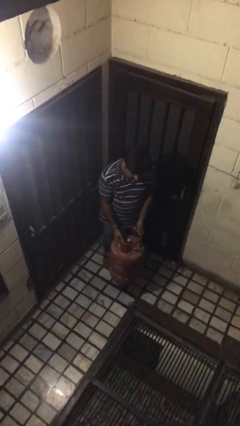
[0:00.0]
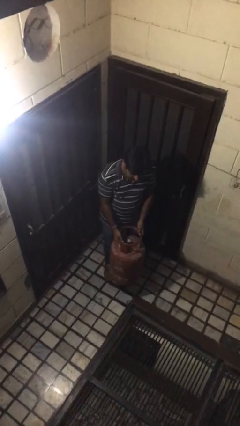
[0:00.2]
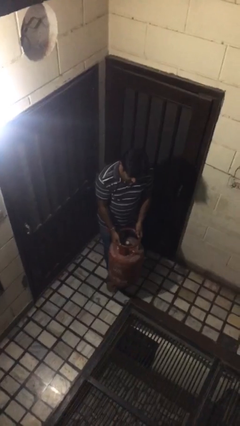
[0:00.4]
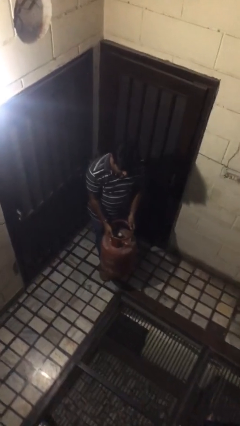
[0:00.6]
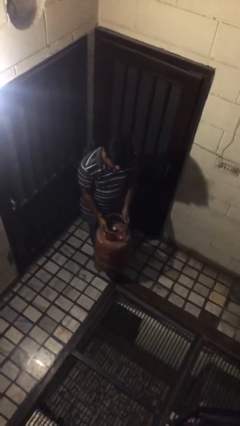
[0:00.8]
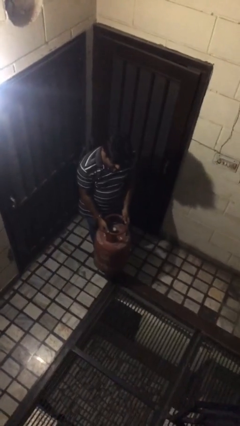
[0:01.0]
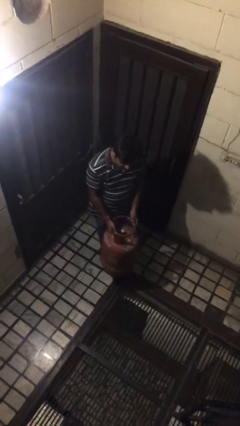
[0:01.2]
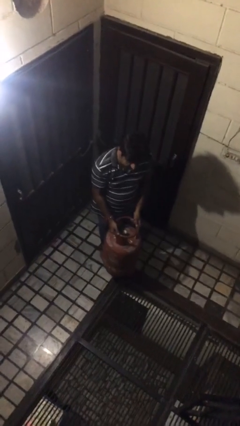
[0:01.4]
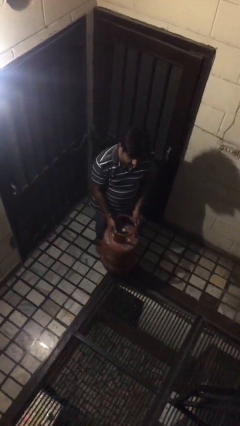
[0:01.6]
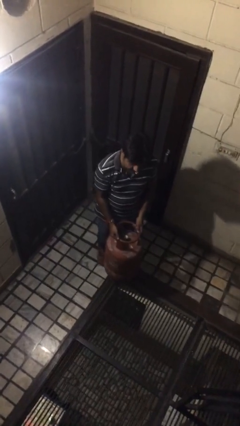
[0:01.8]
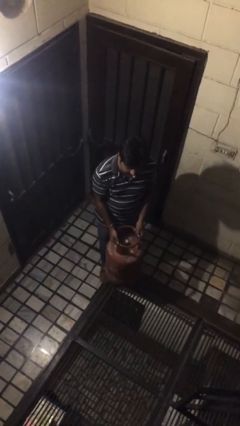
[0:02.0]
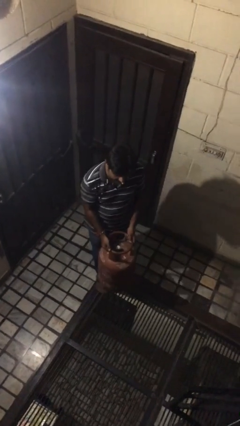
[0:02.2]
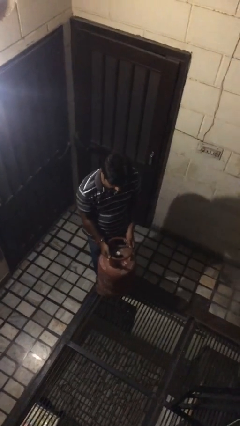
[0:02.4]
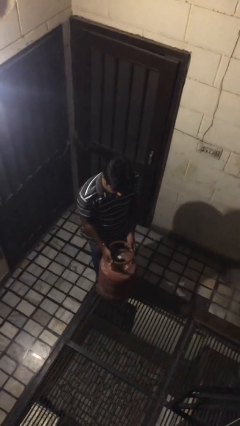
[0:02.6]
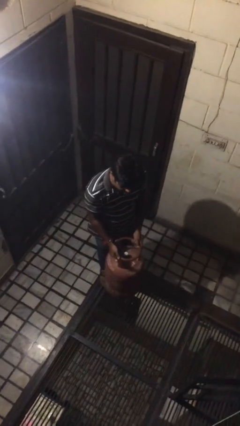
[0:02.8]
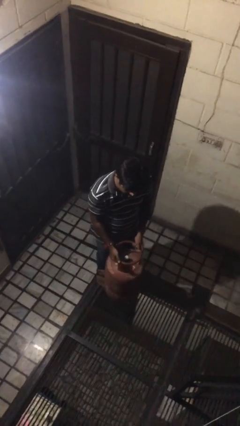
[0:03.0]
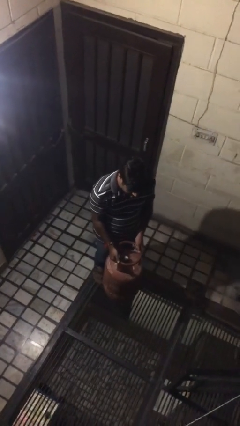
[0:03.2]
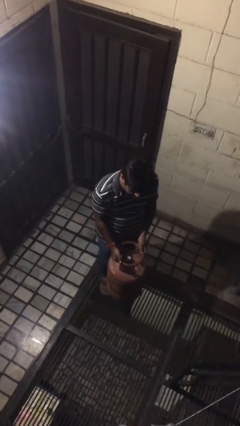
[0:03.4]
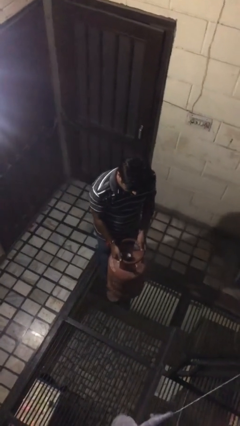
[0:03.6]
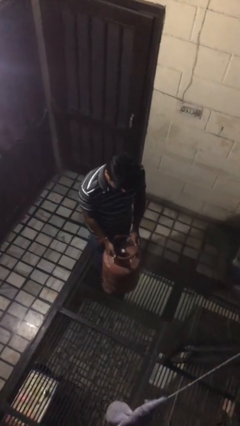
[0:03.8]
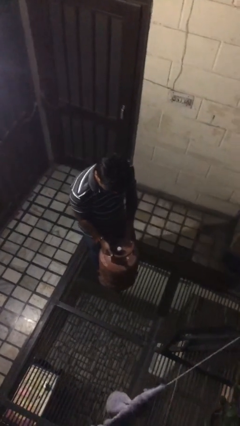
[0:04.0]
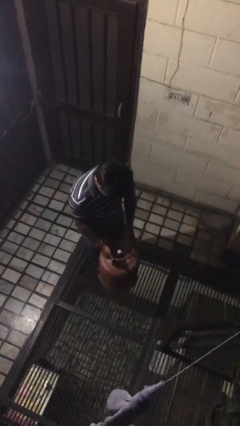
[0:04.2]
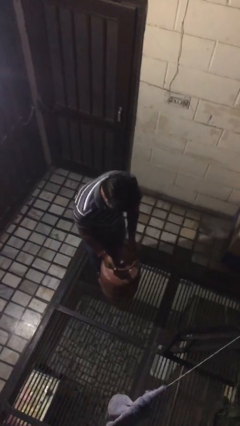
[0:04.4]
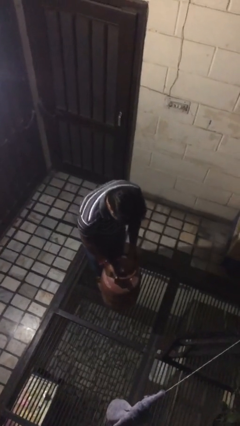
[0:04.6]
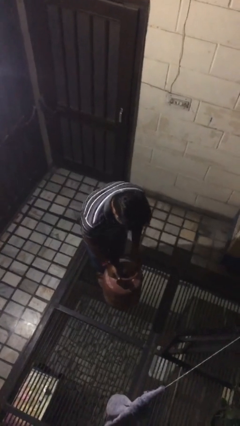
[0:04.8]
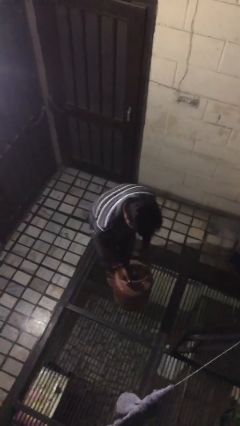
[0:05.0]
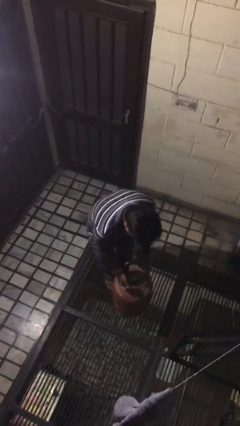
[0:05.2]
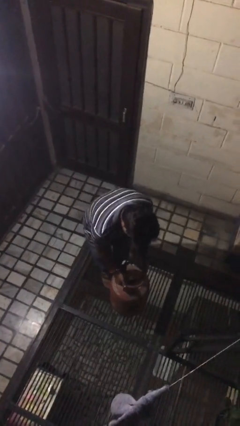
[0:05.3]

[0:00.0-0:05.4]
person carries heavy object

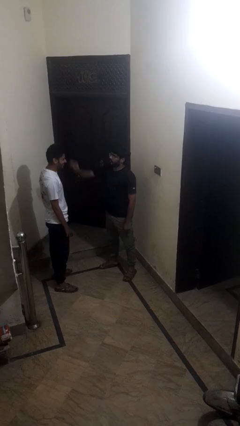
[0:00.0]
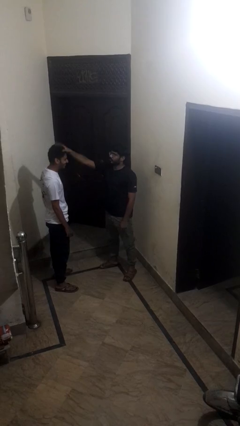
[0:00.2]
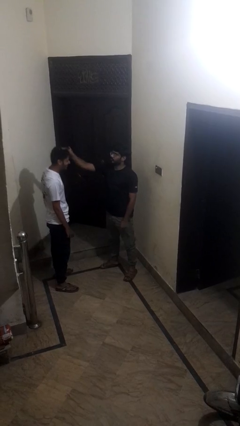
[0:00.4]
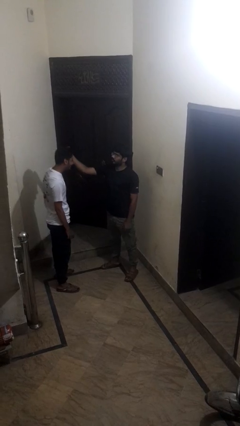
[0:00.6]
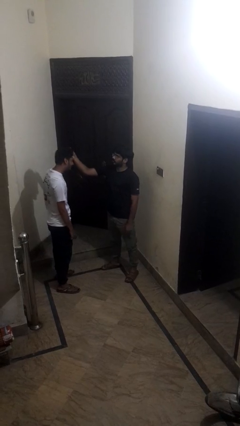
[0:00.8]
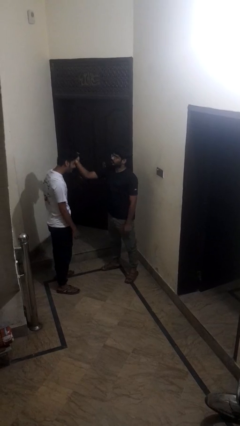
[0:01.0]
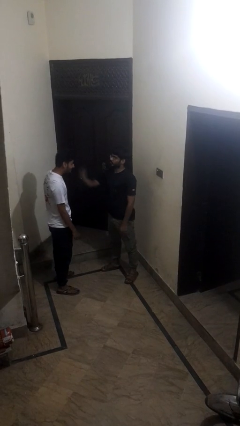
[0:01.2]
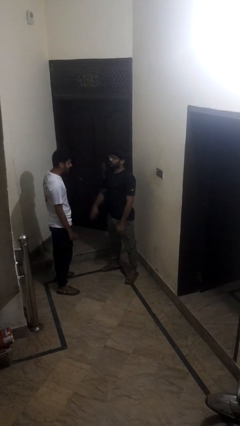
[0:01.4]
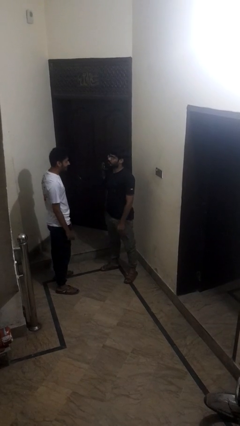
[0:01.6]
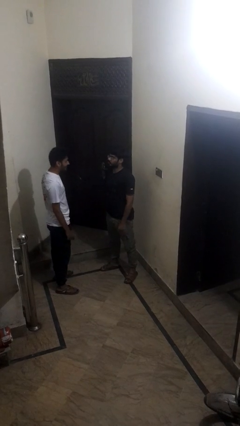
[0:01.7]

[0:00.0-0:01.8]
person grabs person by hair

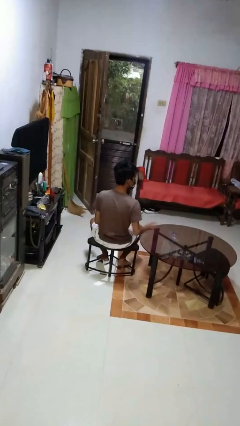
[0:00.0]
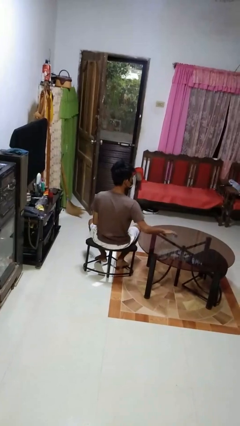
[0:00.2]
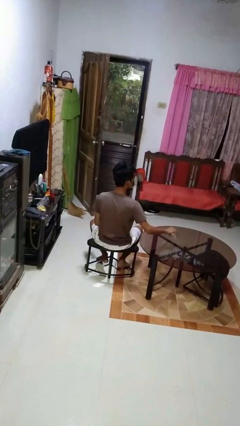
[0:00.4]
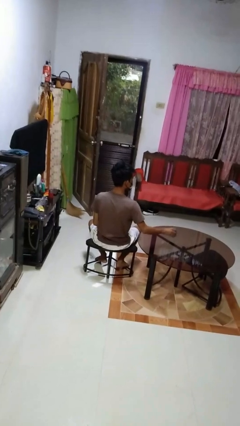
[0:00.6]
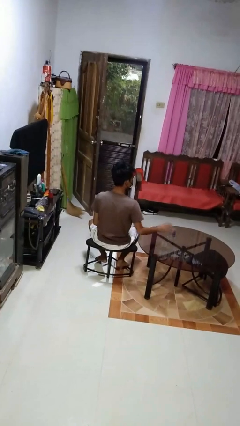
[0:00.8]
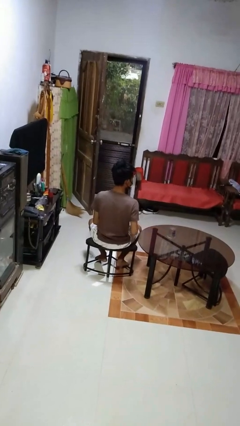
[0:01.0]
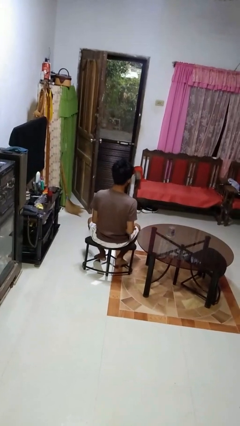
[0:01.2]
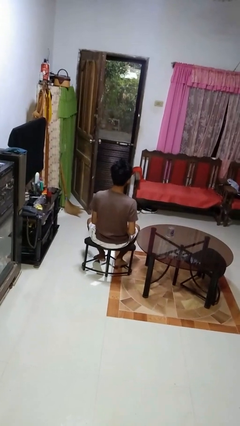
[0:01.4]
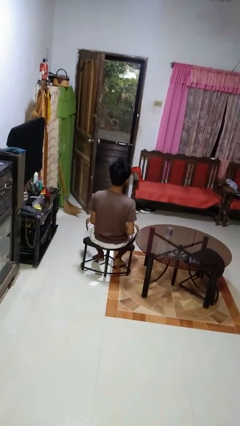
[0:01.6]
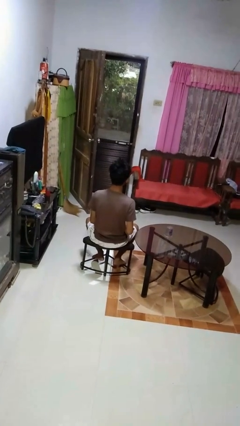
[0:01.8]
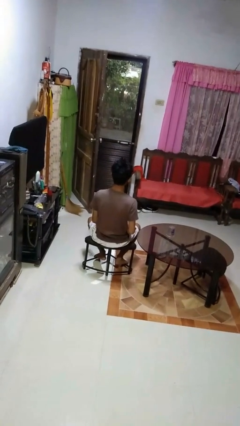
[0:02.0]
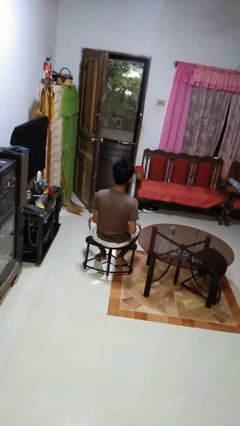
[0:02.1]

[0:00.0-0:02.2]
person sets upright glass

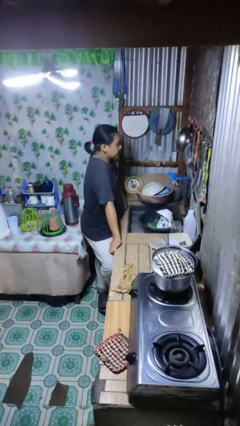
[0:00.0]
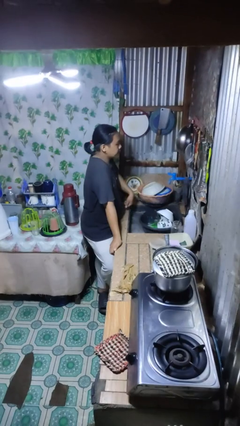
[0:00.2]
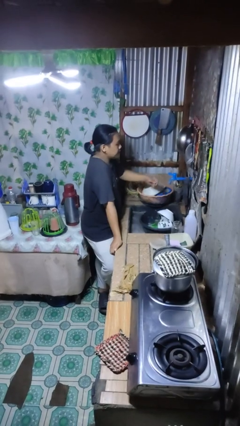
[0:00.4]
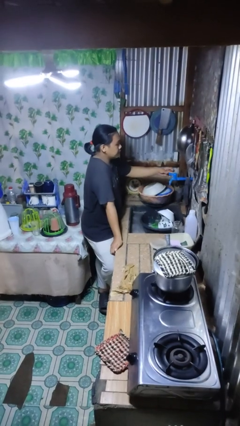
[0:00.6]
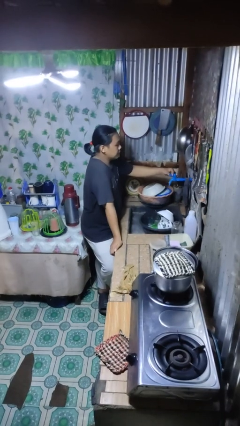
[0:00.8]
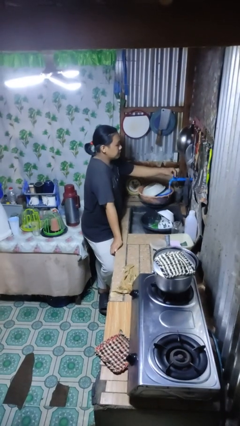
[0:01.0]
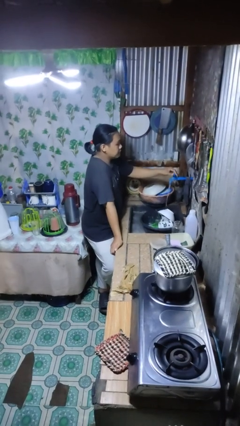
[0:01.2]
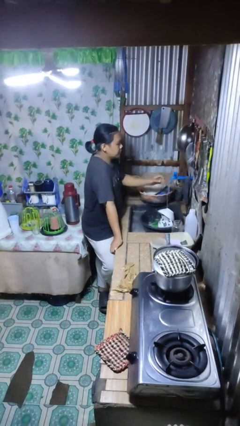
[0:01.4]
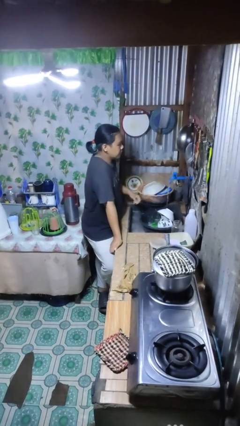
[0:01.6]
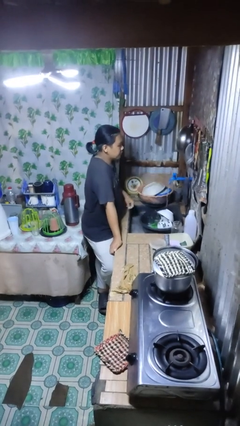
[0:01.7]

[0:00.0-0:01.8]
person turns on faucet

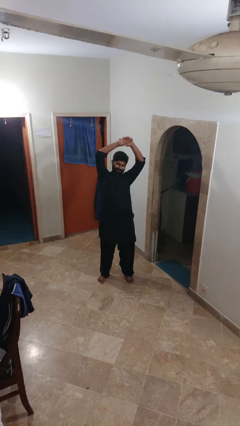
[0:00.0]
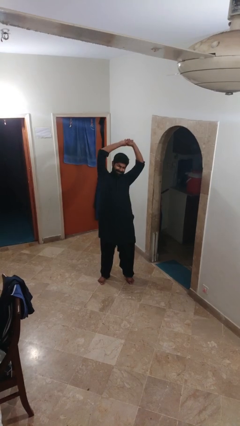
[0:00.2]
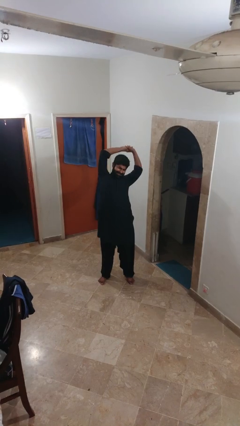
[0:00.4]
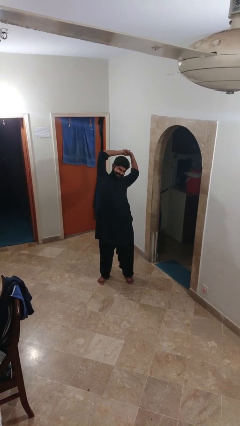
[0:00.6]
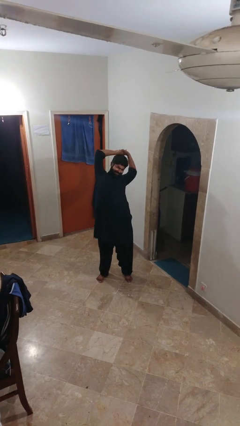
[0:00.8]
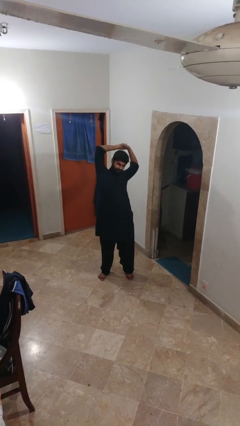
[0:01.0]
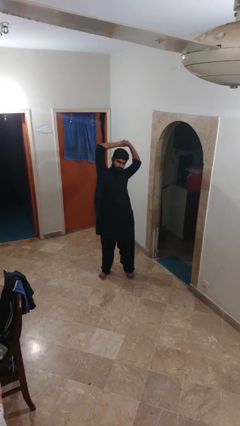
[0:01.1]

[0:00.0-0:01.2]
person stretches arms over head

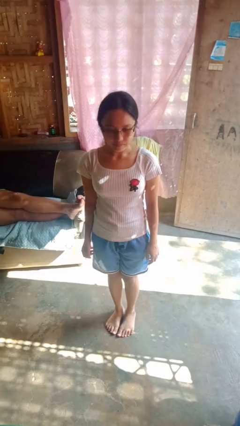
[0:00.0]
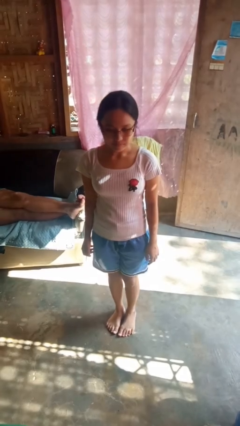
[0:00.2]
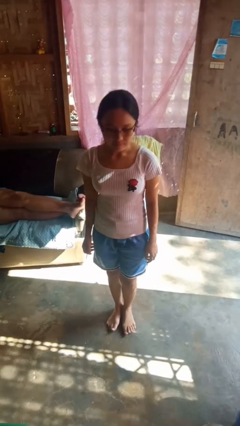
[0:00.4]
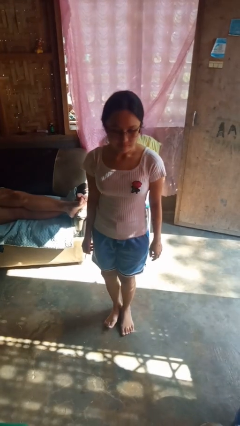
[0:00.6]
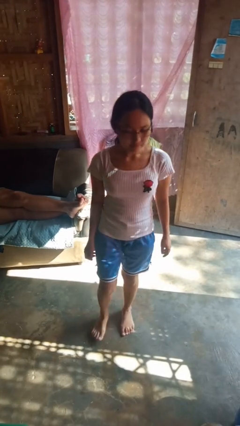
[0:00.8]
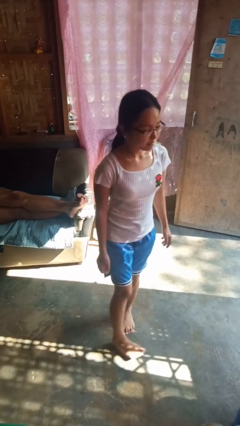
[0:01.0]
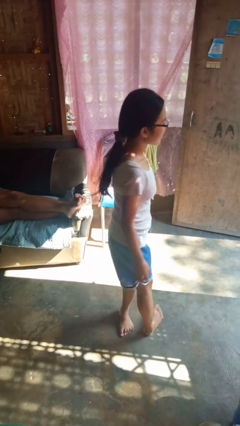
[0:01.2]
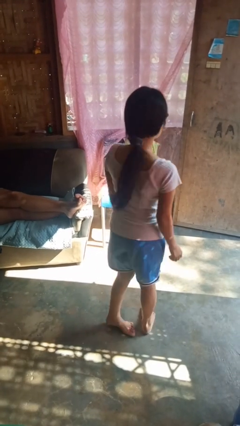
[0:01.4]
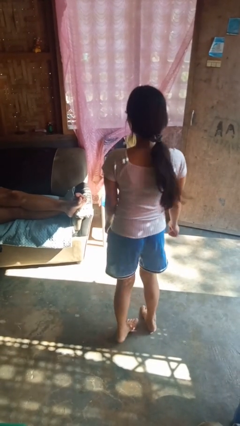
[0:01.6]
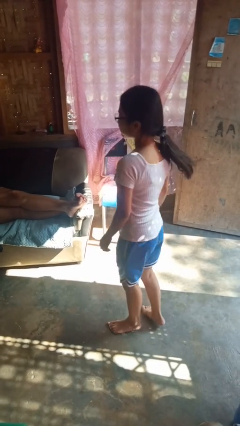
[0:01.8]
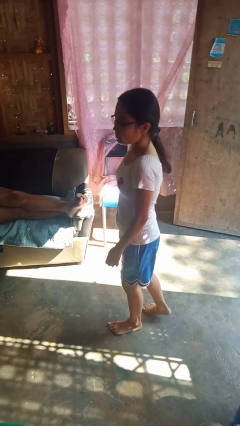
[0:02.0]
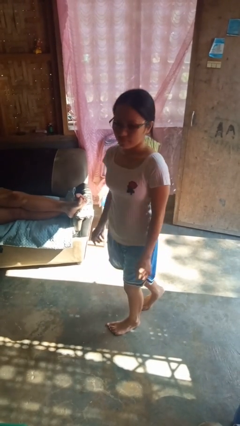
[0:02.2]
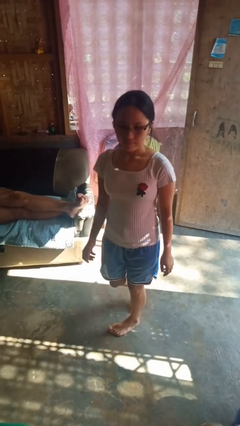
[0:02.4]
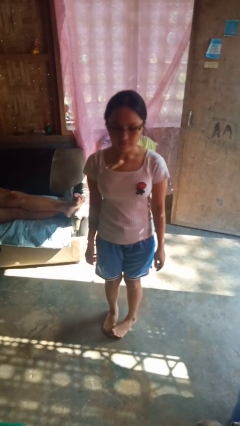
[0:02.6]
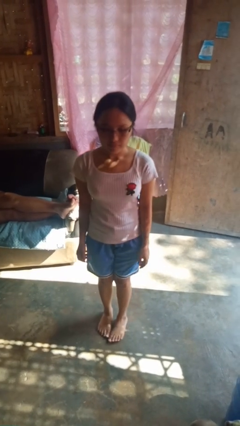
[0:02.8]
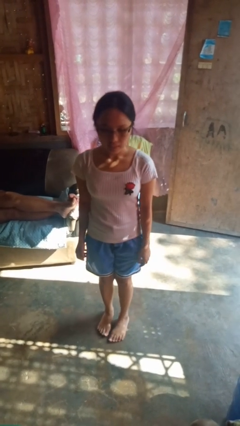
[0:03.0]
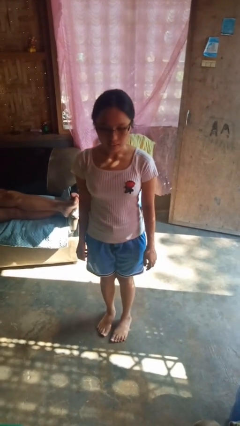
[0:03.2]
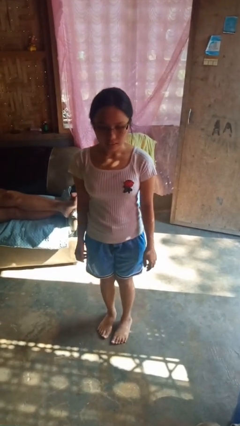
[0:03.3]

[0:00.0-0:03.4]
person twirls

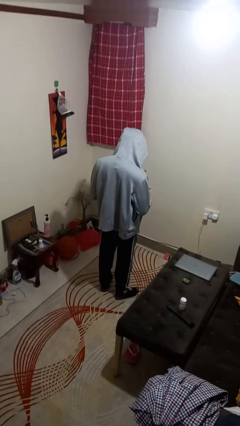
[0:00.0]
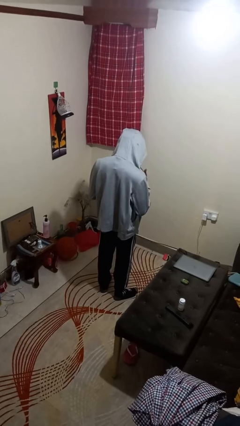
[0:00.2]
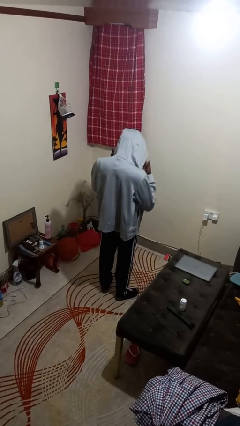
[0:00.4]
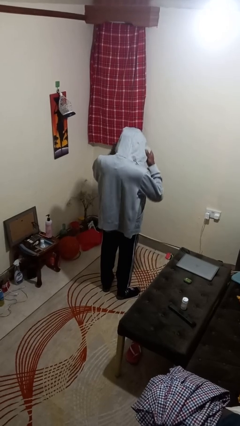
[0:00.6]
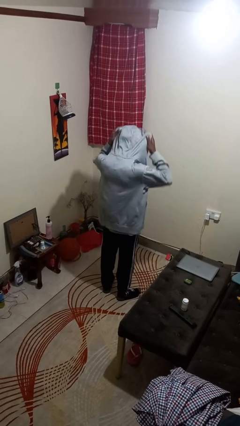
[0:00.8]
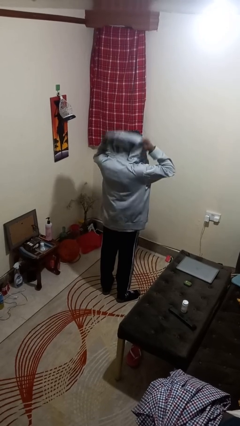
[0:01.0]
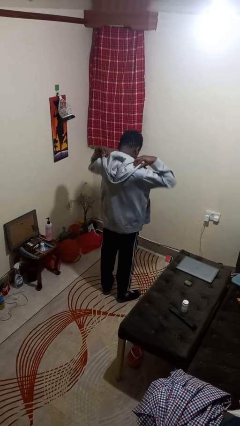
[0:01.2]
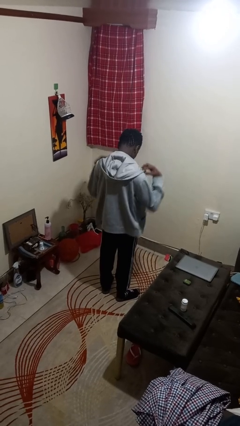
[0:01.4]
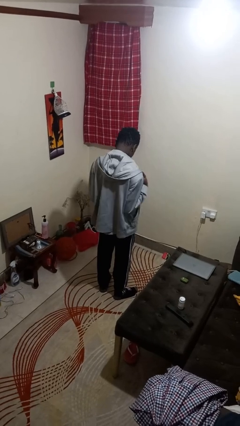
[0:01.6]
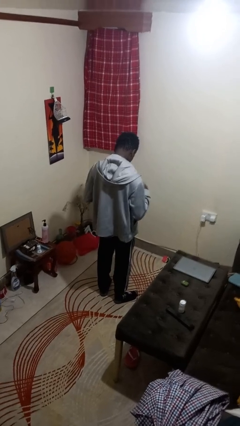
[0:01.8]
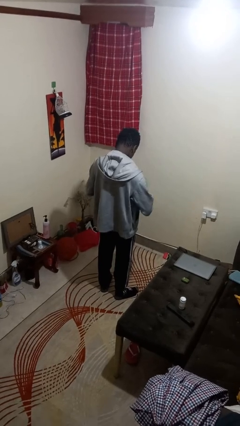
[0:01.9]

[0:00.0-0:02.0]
person takes off hoodie
